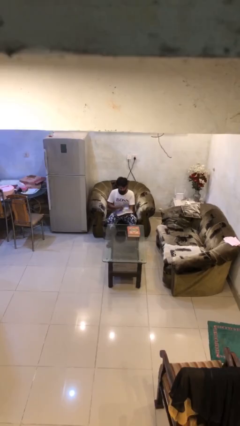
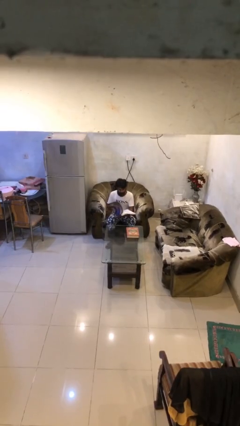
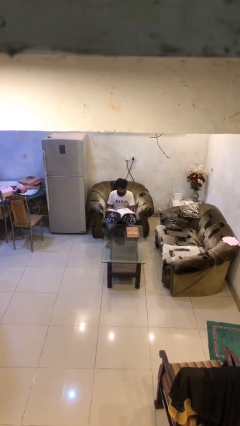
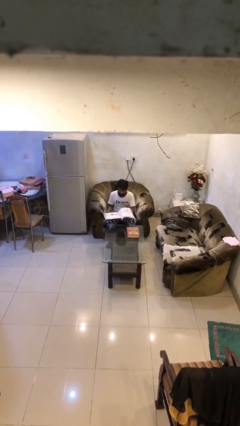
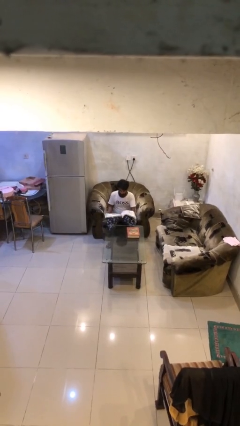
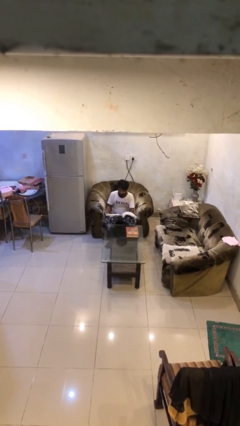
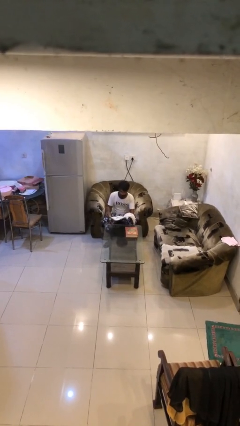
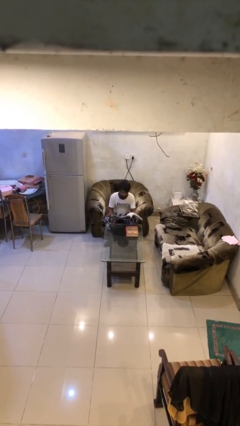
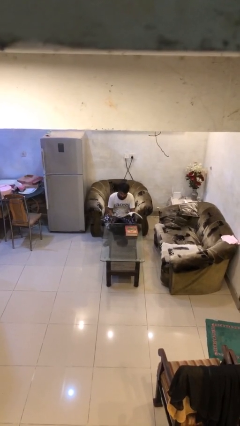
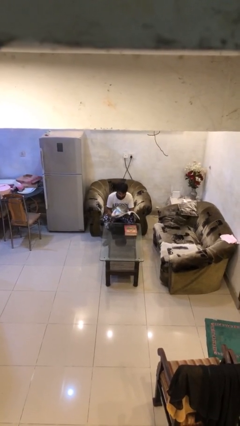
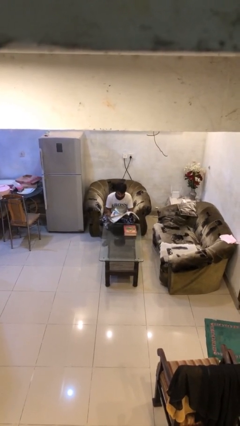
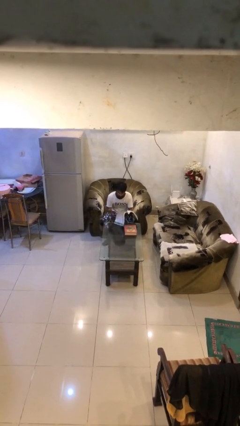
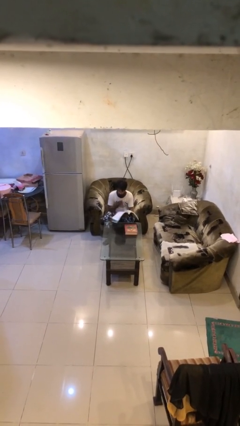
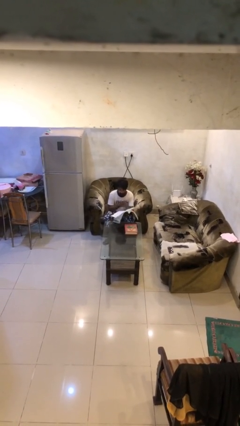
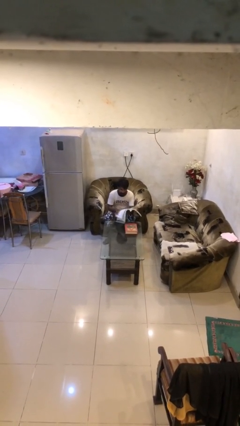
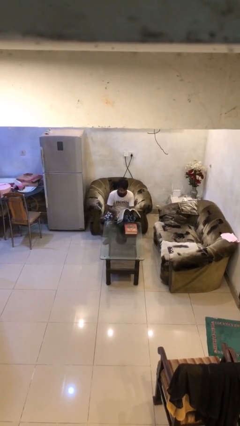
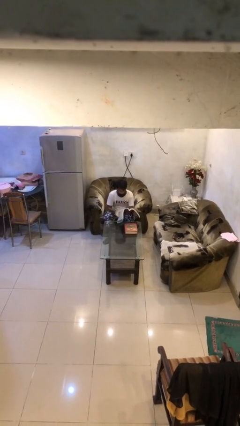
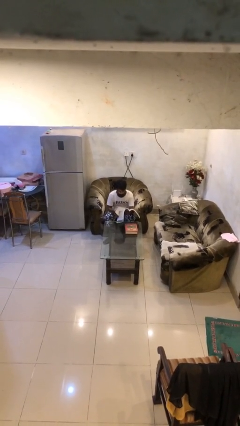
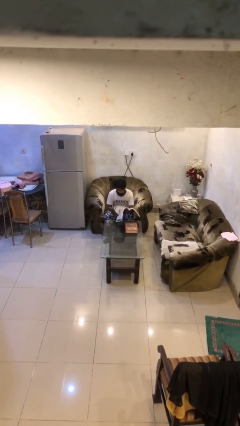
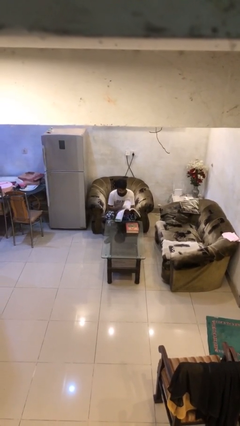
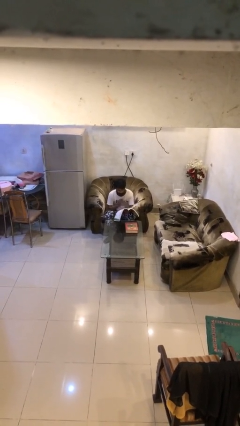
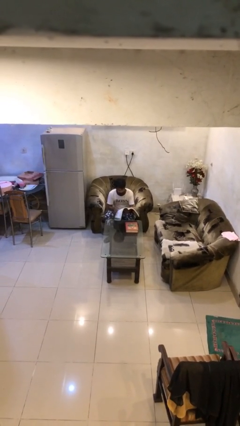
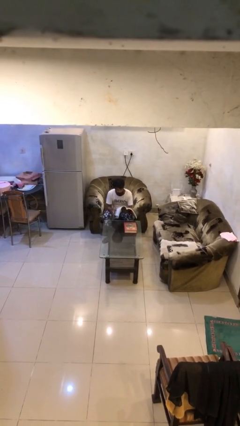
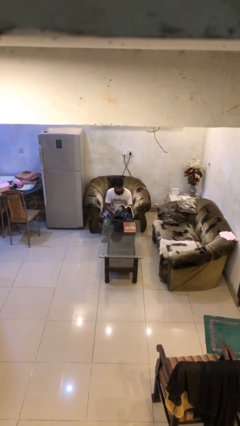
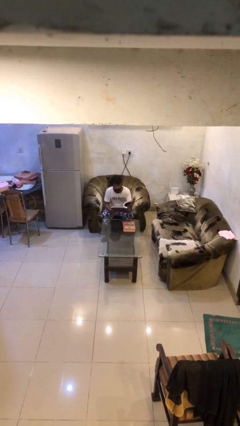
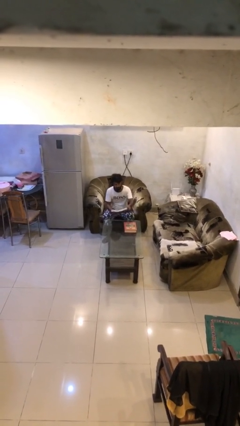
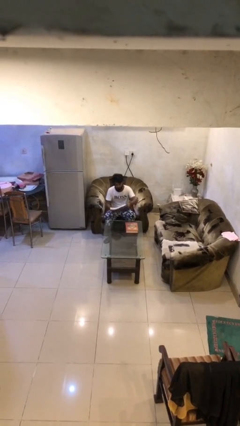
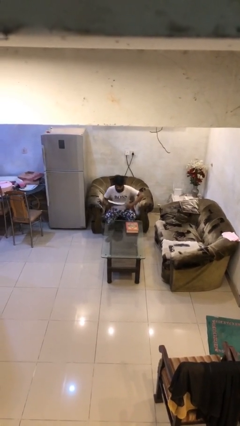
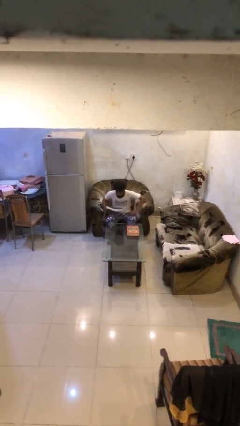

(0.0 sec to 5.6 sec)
person reads document

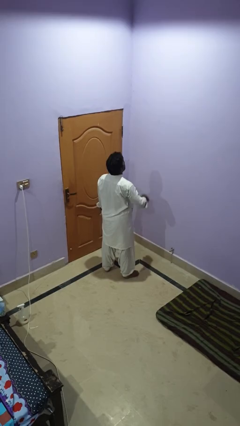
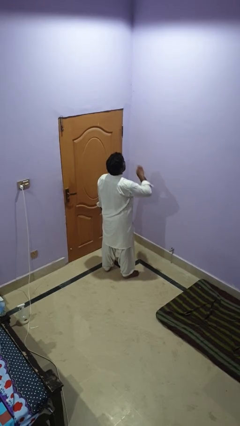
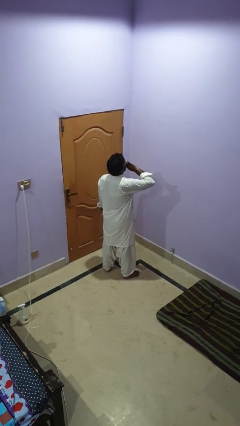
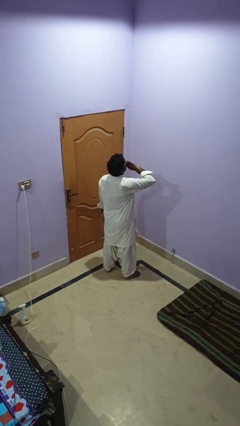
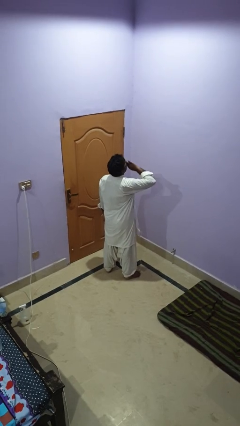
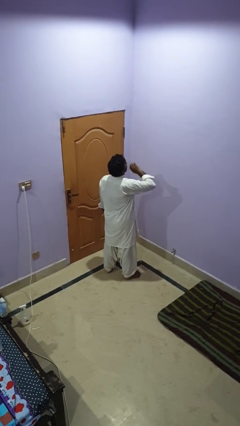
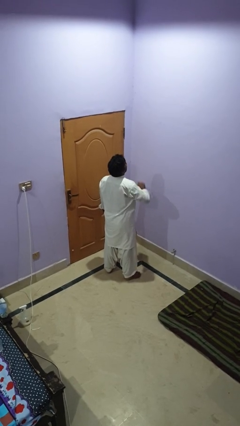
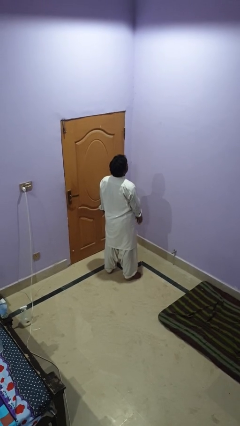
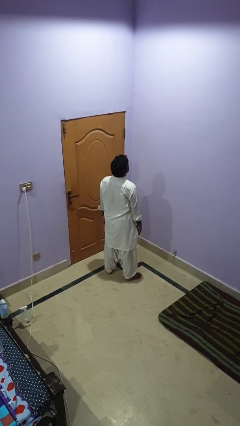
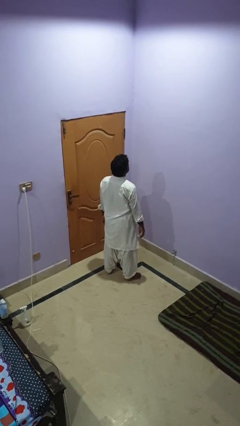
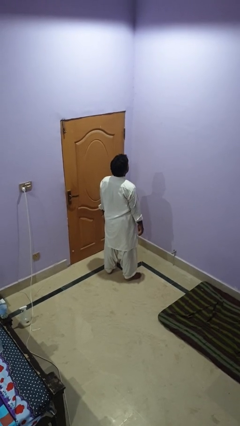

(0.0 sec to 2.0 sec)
person yawns

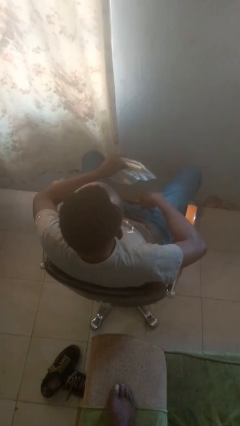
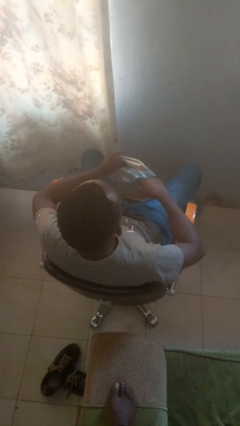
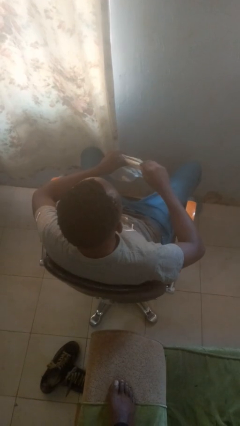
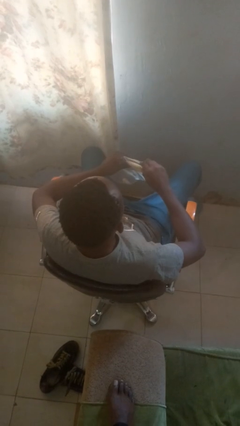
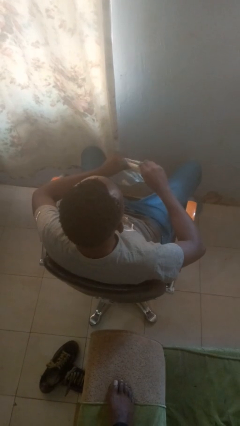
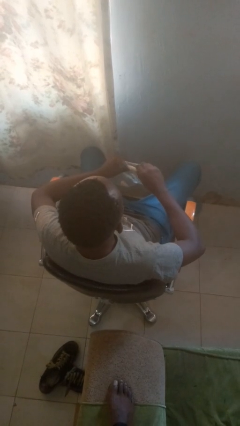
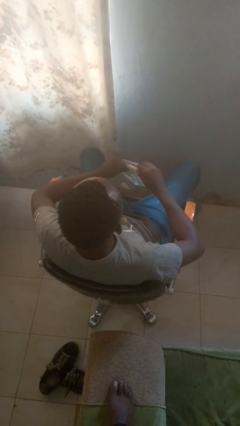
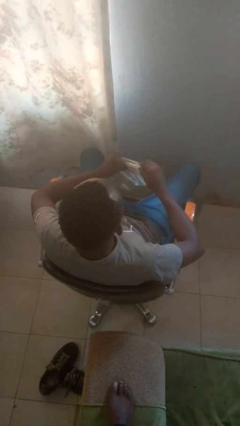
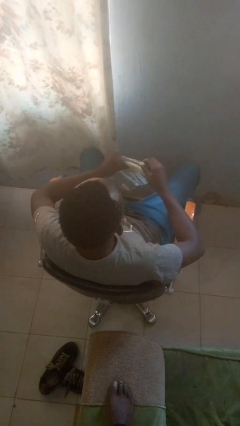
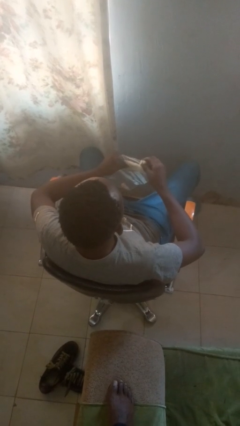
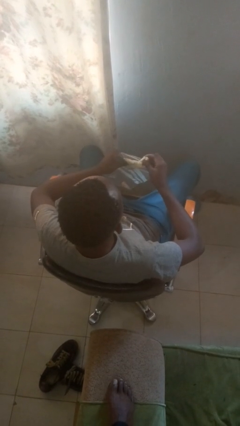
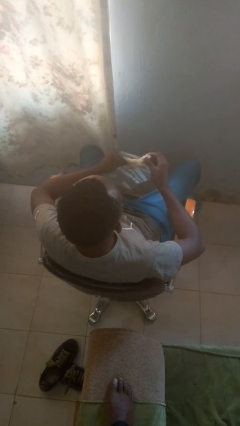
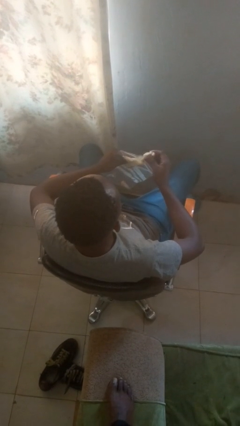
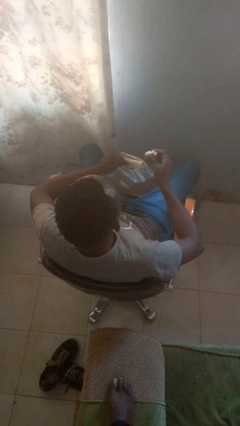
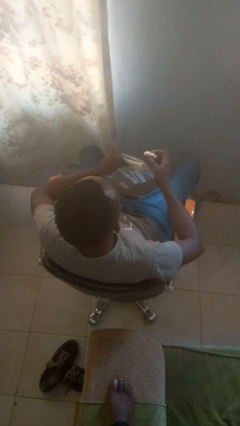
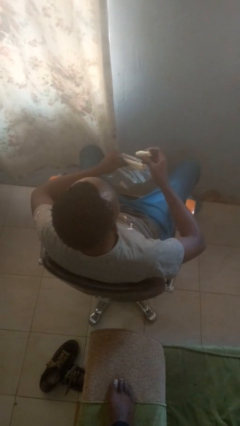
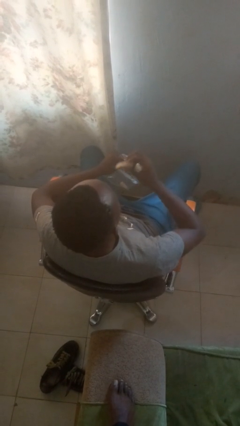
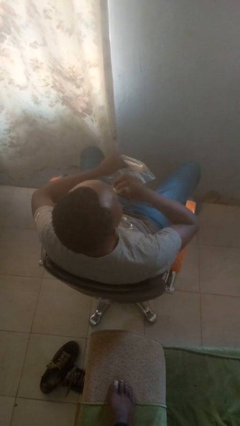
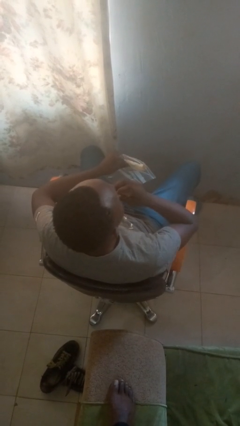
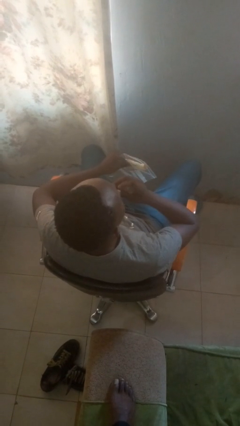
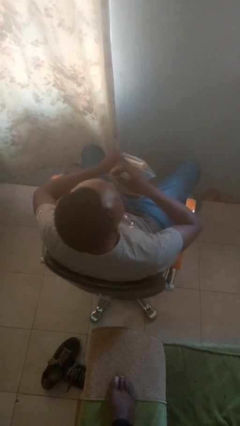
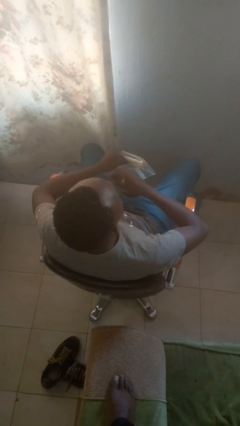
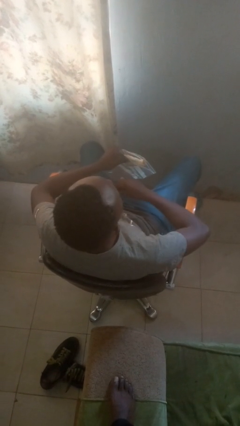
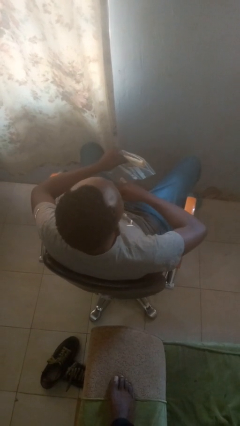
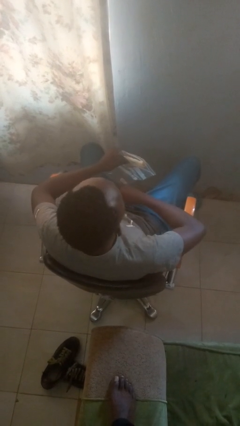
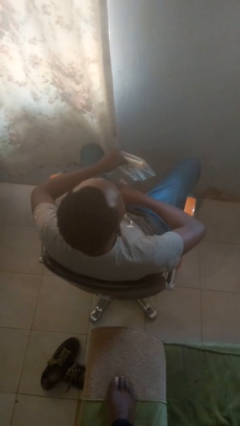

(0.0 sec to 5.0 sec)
person eats snack from bag

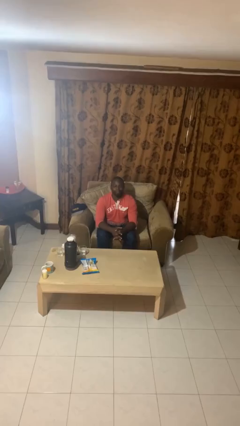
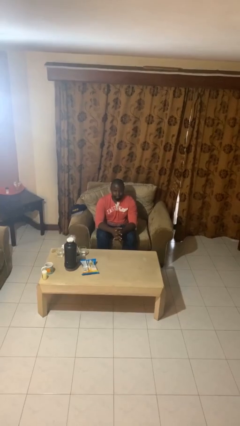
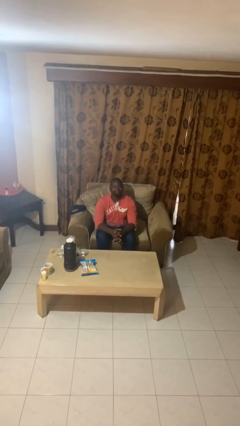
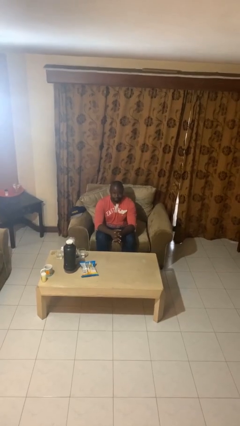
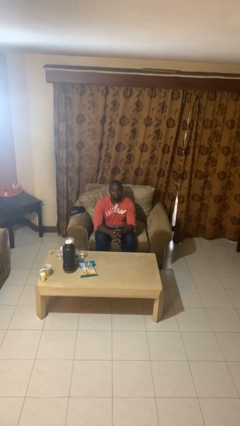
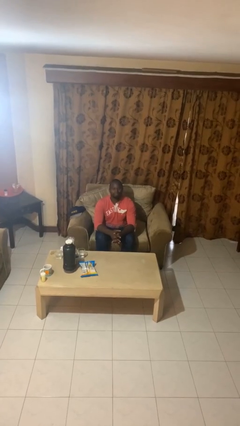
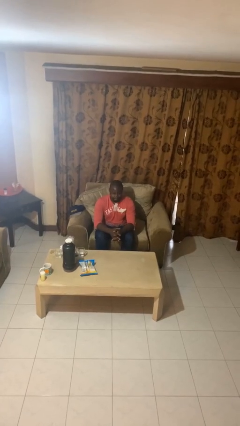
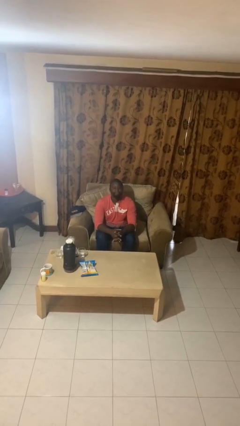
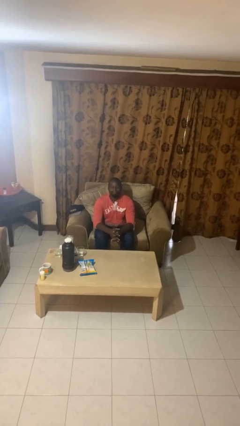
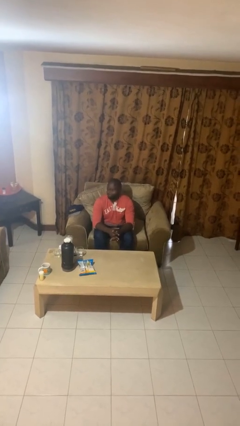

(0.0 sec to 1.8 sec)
person nods head

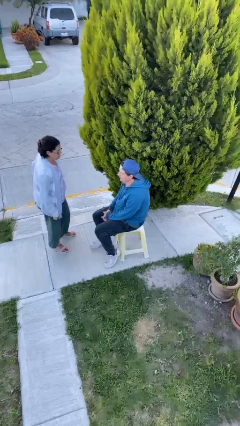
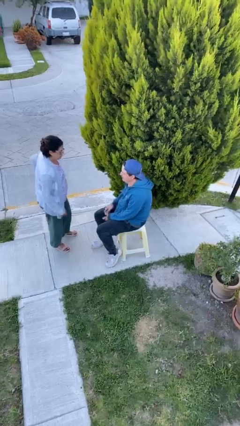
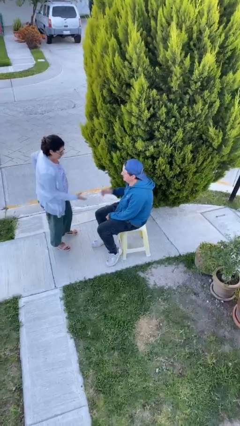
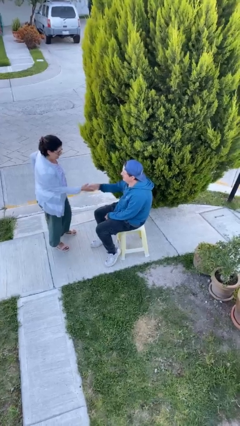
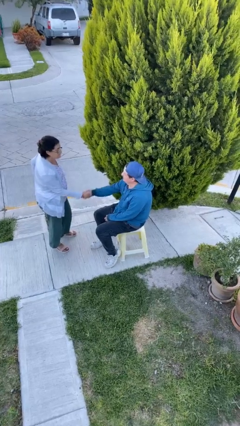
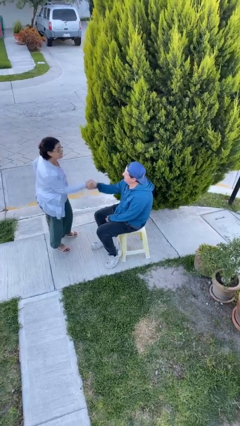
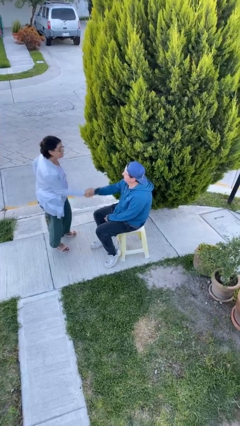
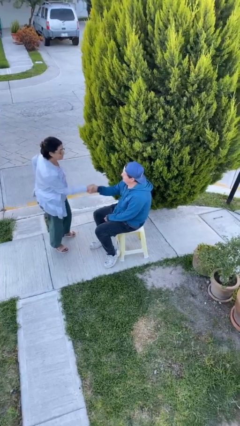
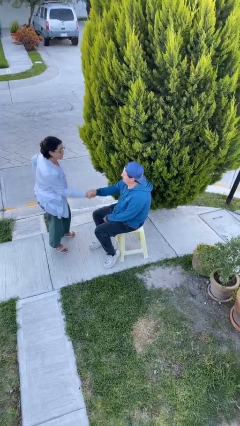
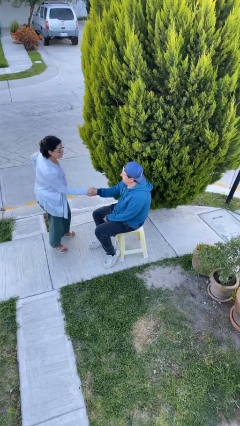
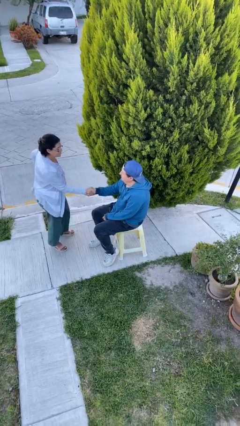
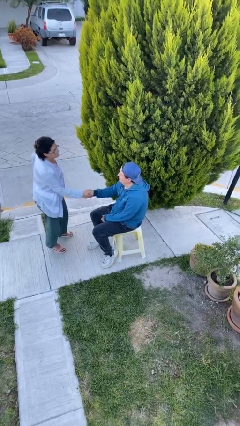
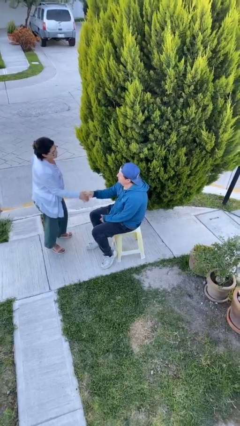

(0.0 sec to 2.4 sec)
person shakes hand

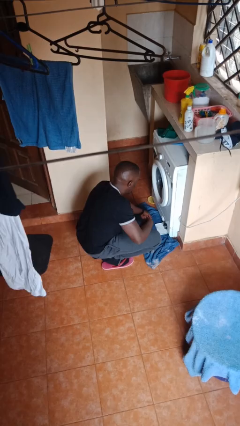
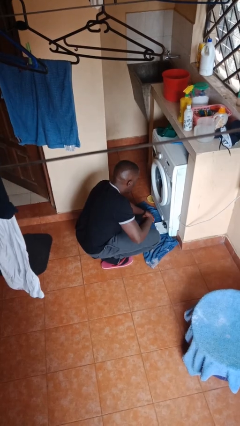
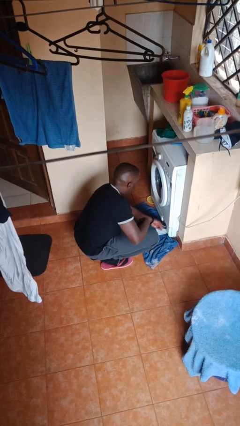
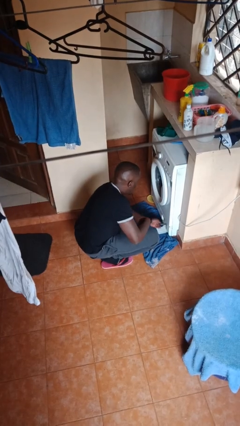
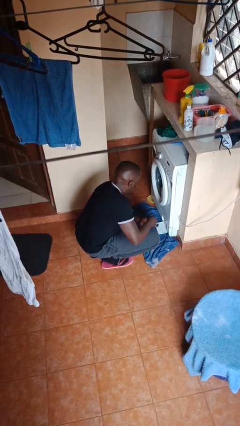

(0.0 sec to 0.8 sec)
person cleans dryer lint trap
